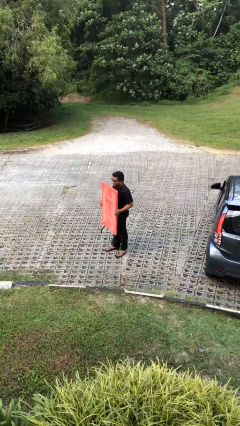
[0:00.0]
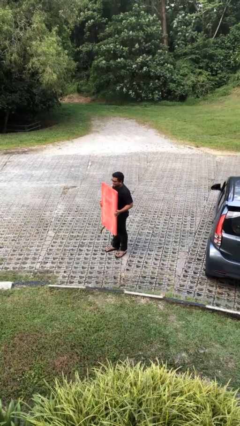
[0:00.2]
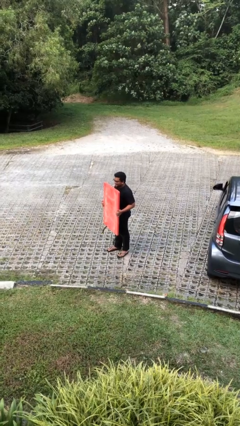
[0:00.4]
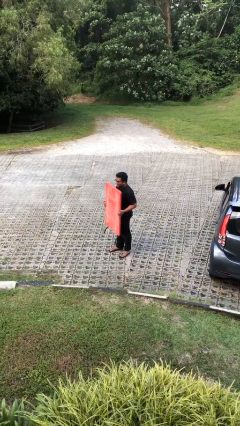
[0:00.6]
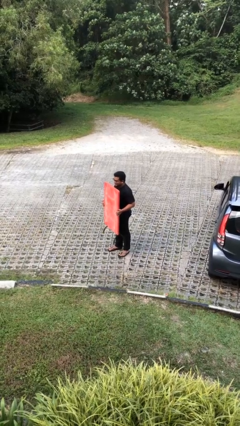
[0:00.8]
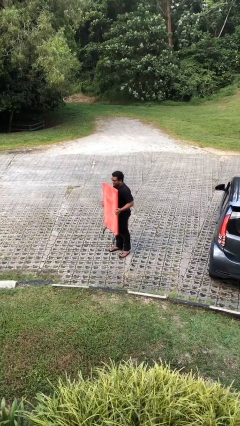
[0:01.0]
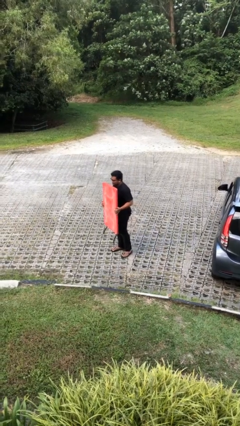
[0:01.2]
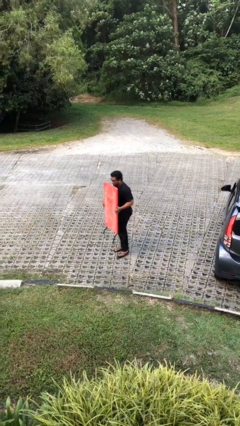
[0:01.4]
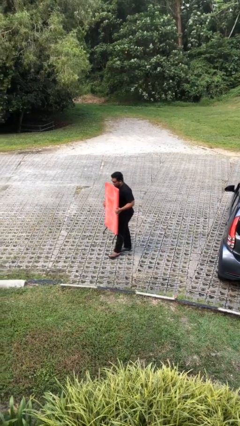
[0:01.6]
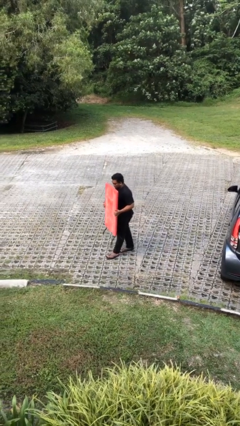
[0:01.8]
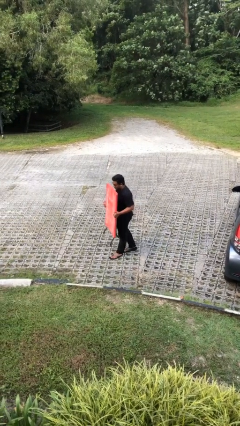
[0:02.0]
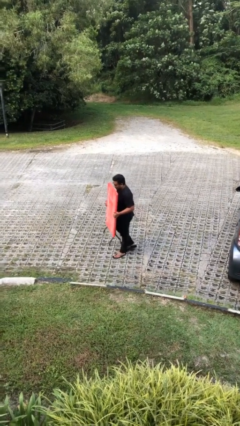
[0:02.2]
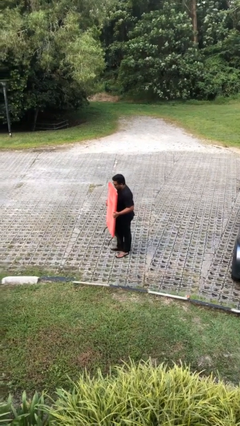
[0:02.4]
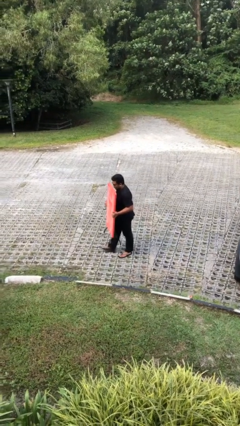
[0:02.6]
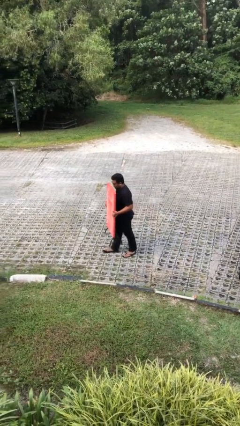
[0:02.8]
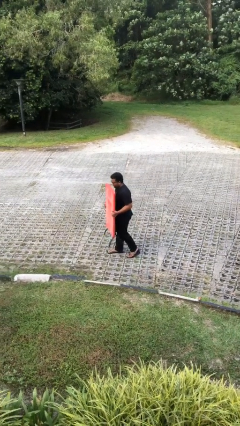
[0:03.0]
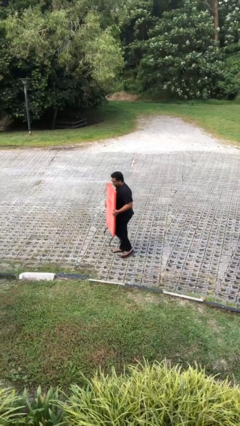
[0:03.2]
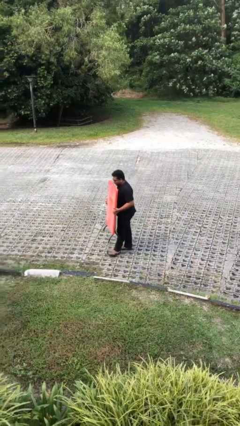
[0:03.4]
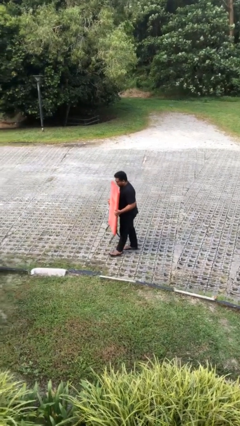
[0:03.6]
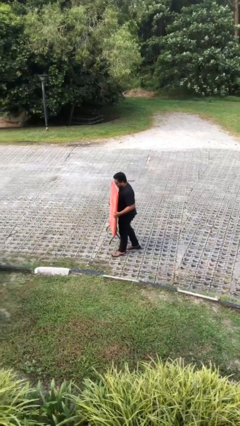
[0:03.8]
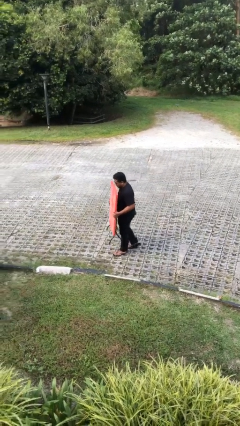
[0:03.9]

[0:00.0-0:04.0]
person carries heavy object

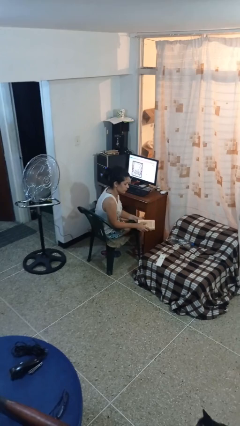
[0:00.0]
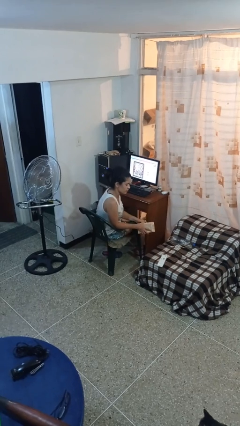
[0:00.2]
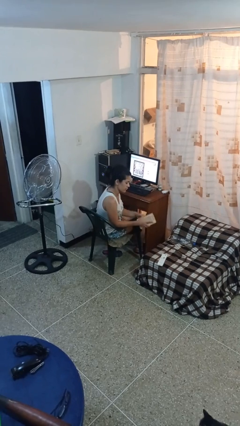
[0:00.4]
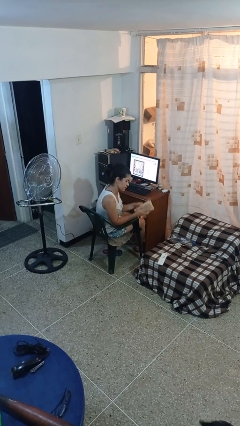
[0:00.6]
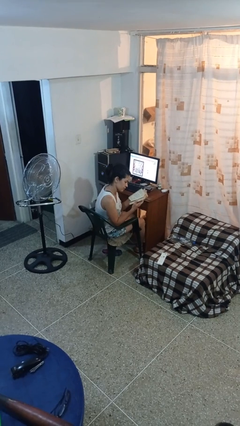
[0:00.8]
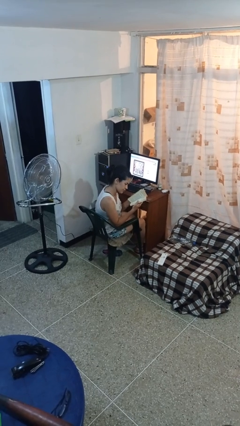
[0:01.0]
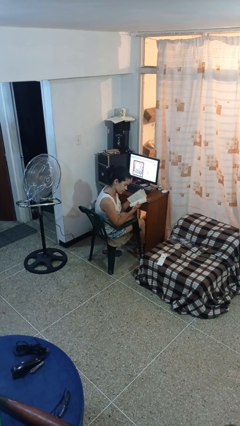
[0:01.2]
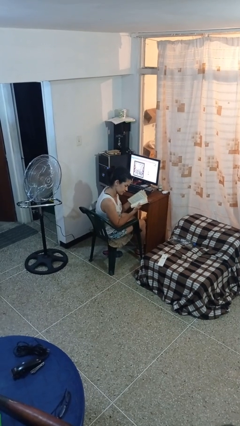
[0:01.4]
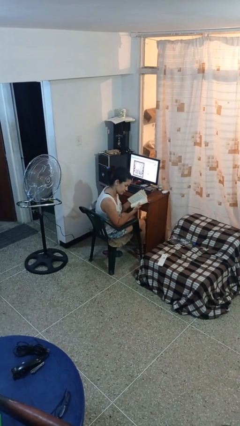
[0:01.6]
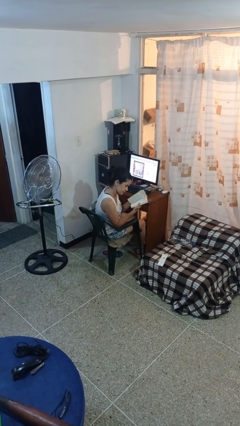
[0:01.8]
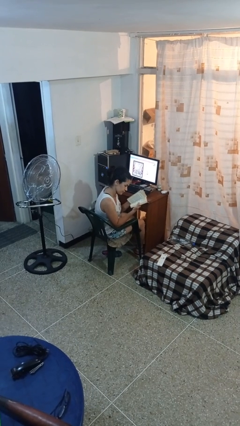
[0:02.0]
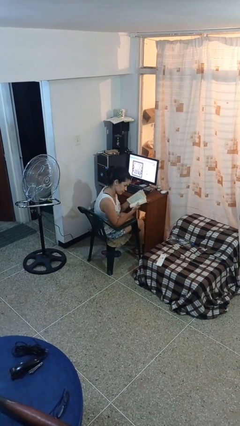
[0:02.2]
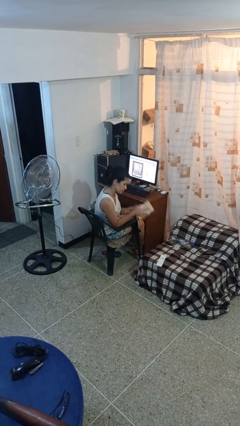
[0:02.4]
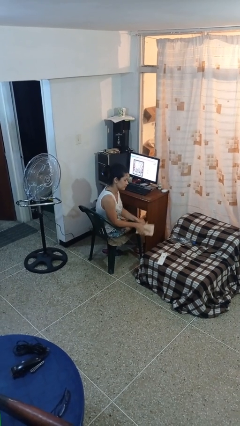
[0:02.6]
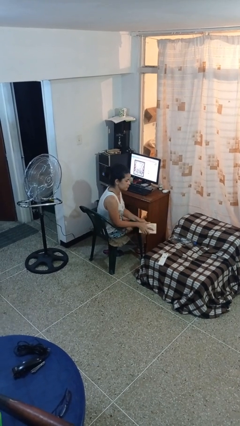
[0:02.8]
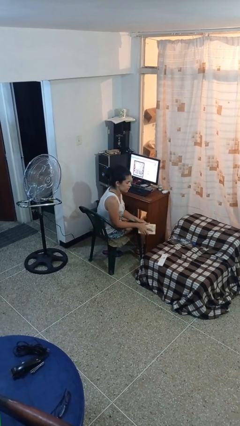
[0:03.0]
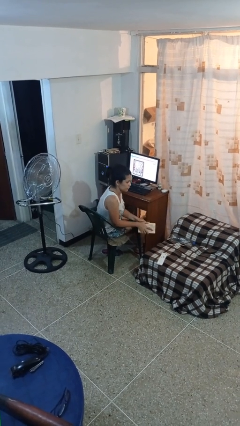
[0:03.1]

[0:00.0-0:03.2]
person reads book

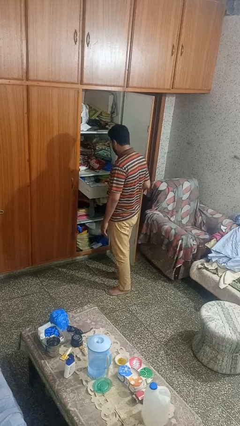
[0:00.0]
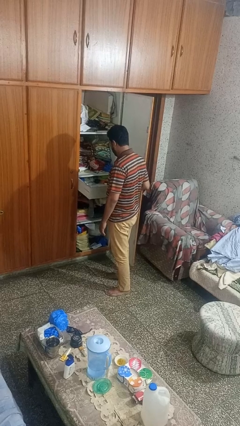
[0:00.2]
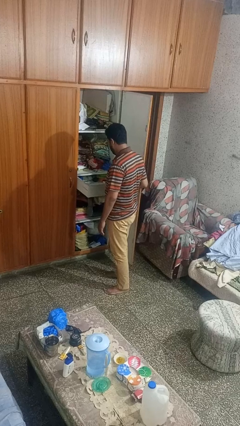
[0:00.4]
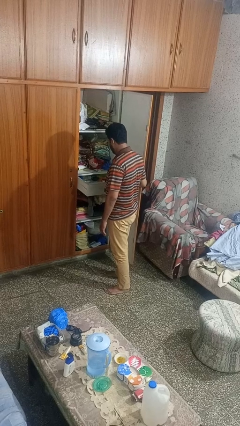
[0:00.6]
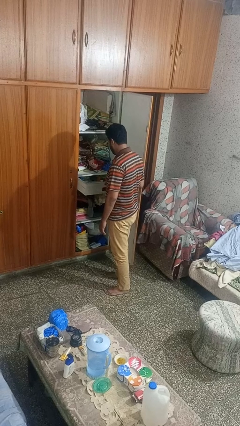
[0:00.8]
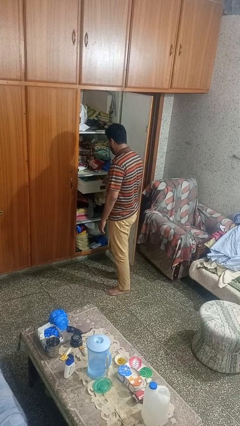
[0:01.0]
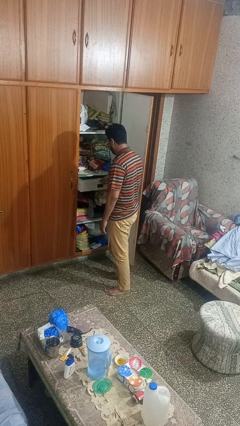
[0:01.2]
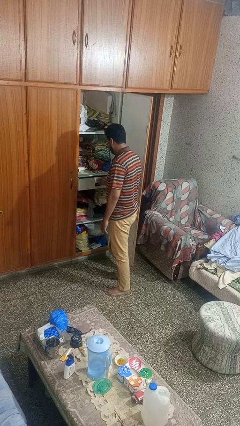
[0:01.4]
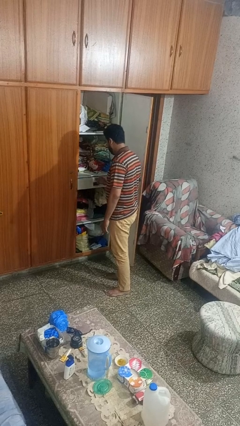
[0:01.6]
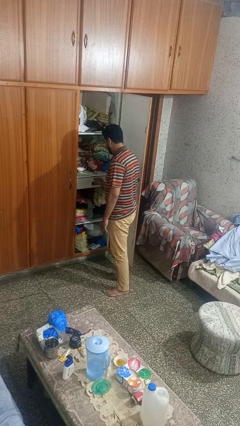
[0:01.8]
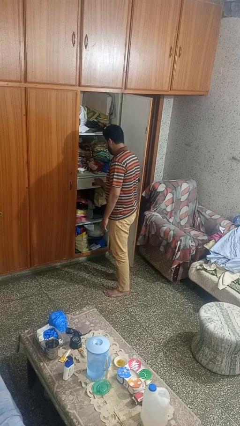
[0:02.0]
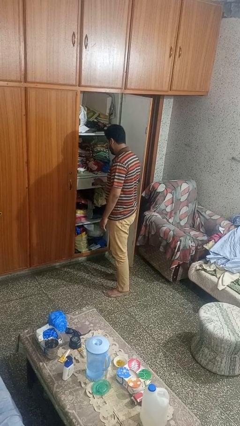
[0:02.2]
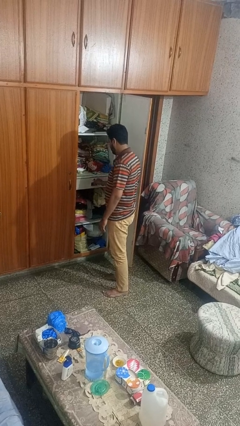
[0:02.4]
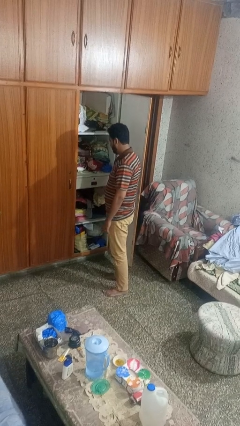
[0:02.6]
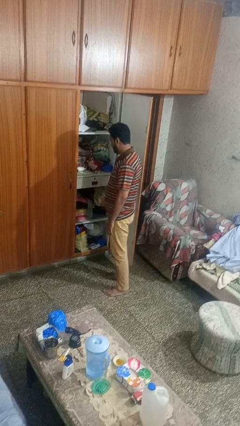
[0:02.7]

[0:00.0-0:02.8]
person closes dresser drawer

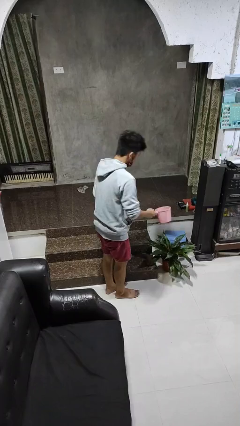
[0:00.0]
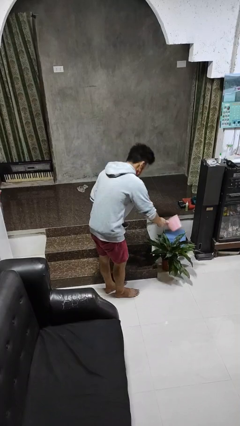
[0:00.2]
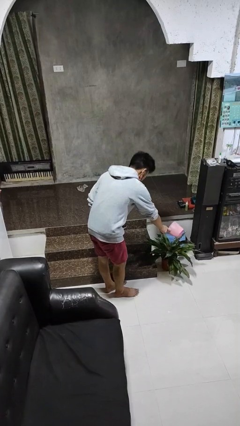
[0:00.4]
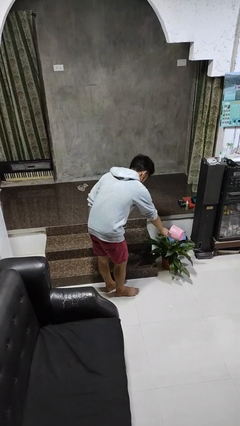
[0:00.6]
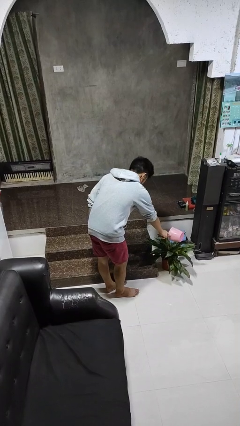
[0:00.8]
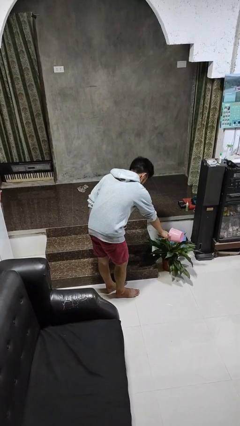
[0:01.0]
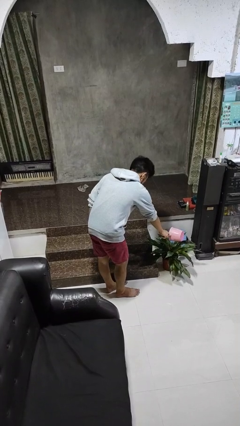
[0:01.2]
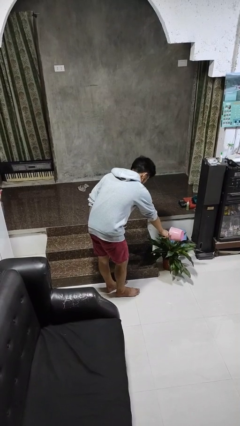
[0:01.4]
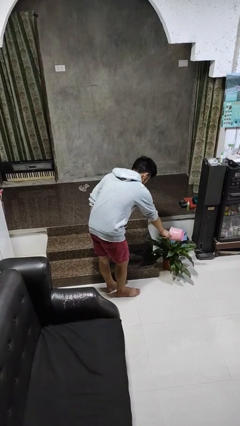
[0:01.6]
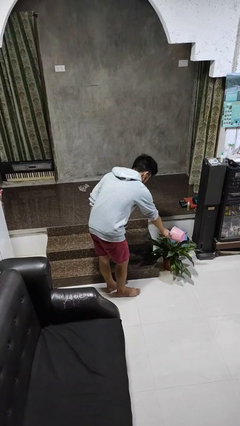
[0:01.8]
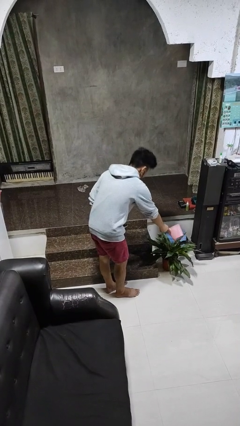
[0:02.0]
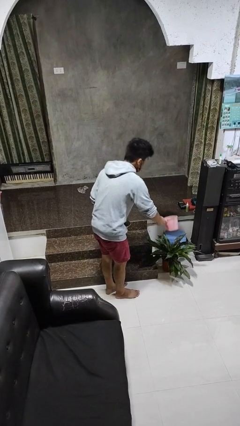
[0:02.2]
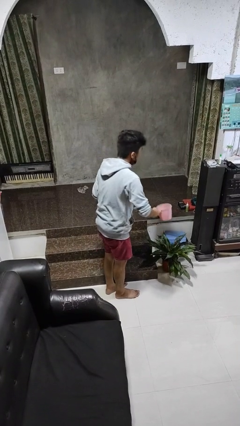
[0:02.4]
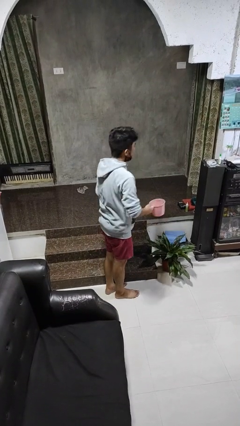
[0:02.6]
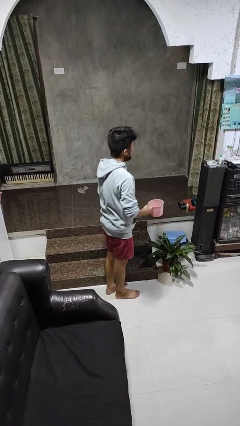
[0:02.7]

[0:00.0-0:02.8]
person waters houseplant

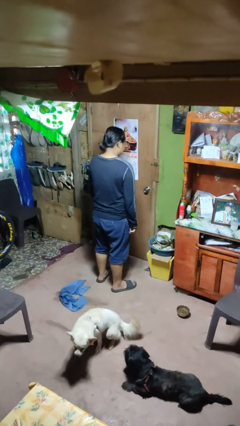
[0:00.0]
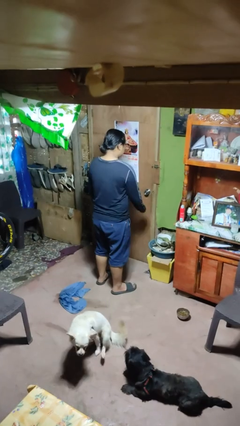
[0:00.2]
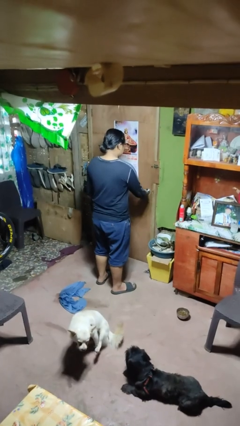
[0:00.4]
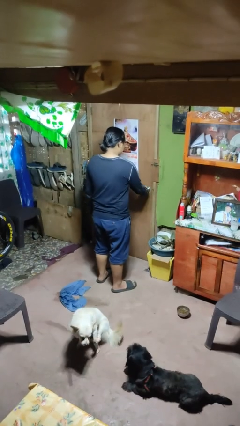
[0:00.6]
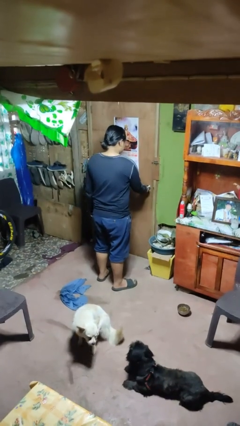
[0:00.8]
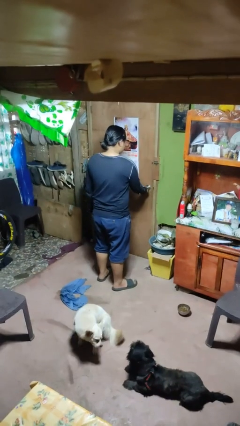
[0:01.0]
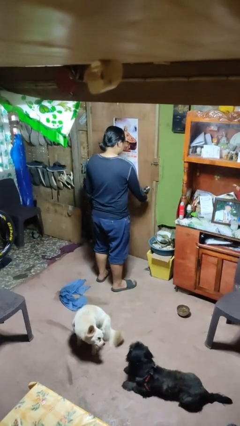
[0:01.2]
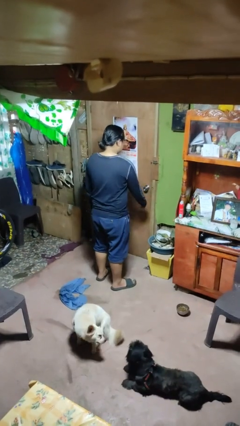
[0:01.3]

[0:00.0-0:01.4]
person unlocks door with keys

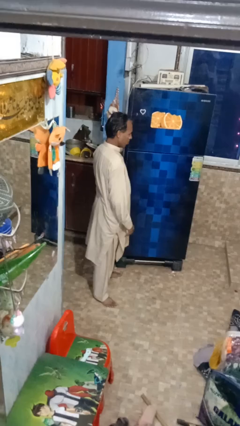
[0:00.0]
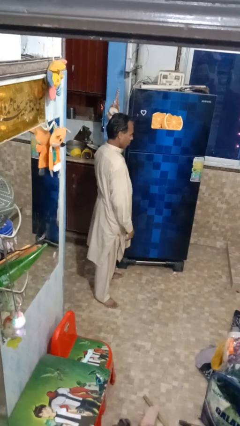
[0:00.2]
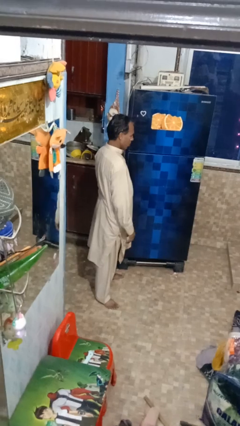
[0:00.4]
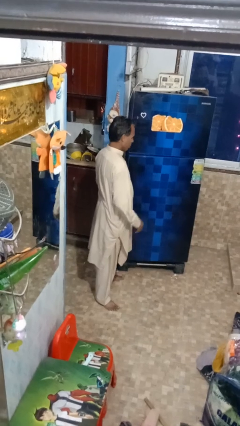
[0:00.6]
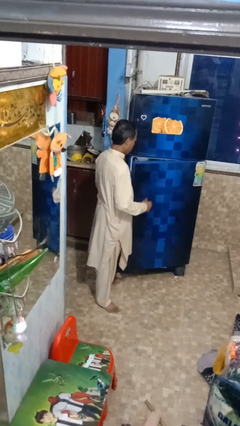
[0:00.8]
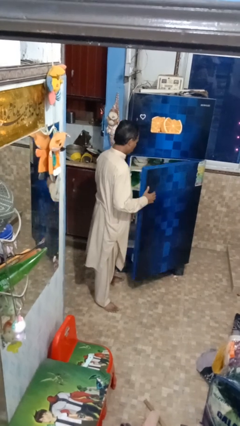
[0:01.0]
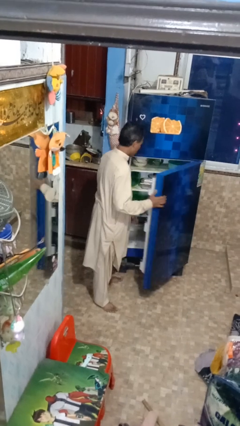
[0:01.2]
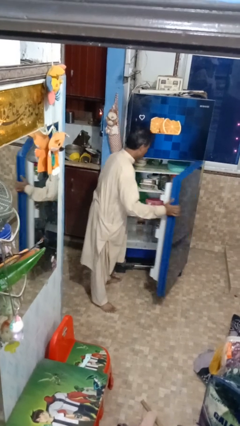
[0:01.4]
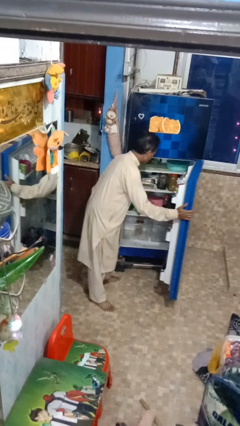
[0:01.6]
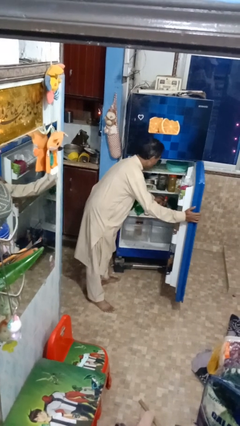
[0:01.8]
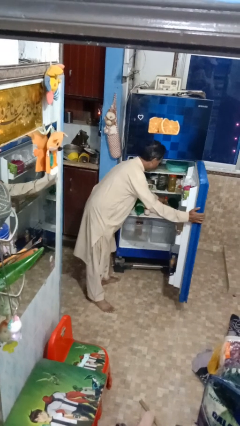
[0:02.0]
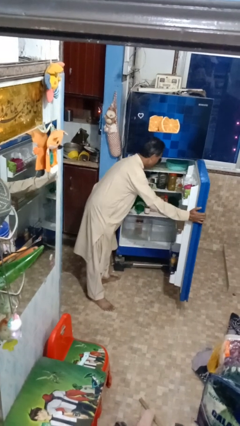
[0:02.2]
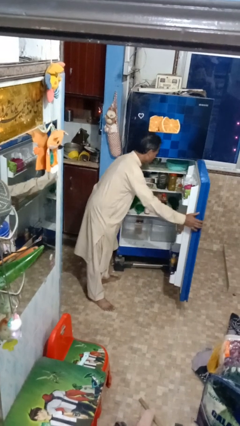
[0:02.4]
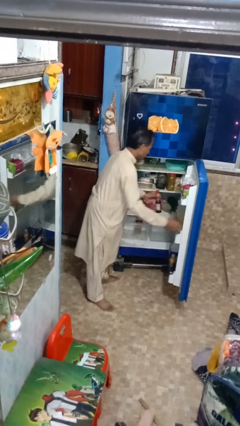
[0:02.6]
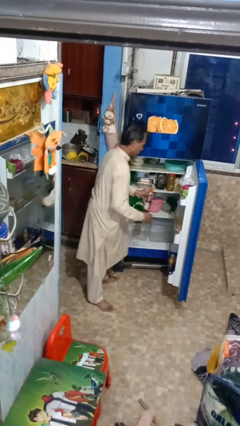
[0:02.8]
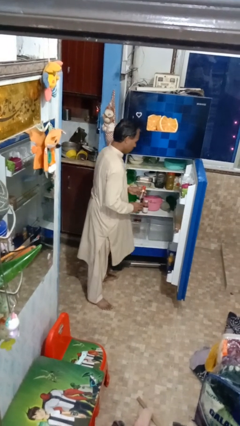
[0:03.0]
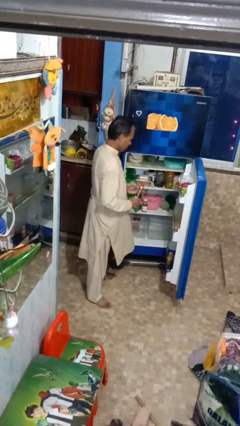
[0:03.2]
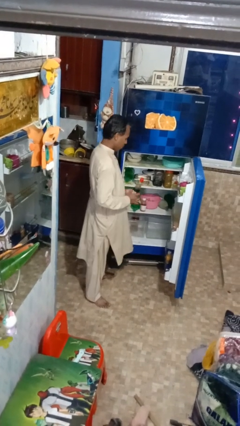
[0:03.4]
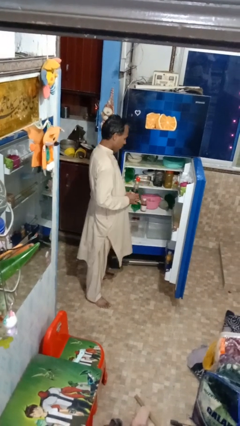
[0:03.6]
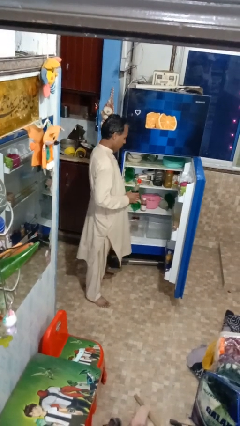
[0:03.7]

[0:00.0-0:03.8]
person puts object into refrigerator
